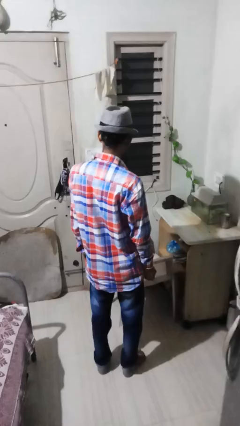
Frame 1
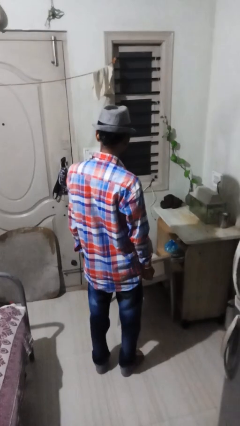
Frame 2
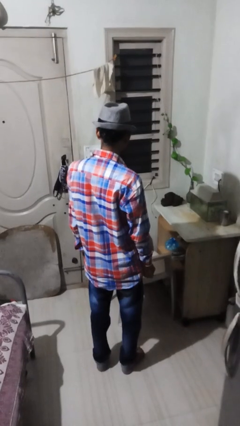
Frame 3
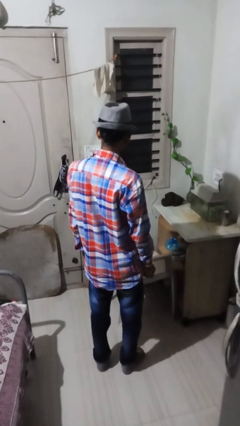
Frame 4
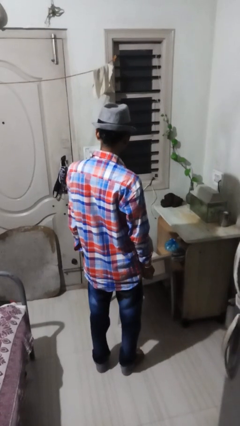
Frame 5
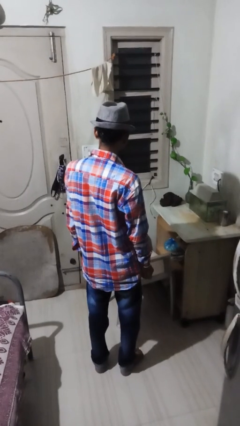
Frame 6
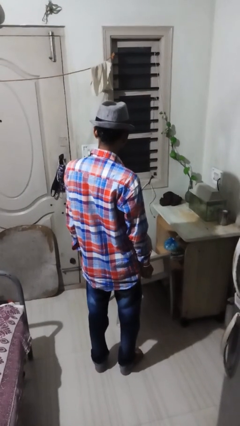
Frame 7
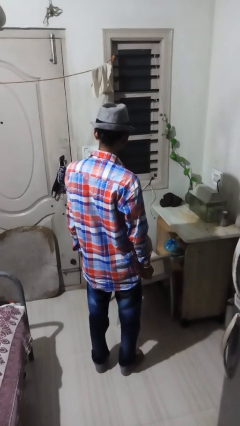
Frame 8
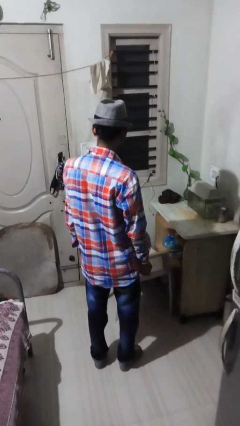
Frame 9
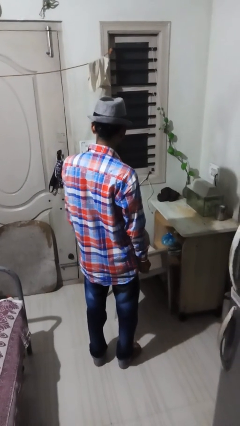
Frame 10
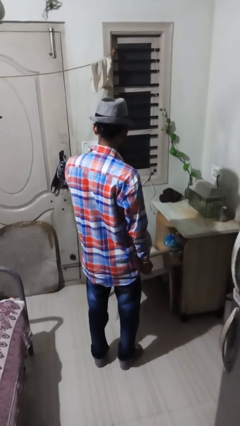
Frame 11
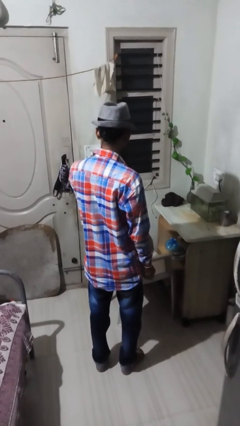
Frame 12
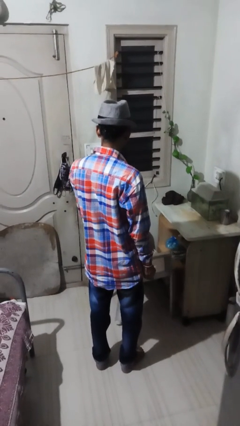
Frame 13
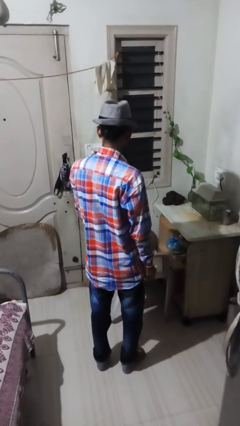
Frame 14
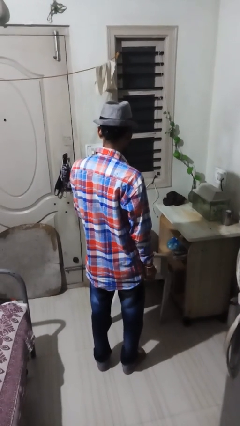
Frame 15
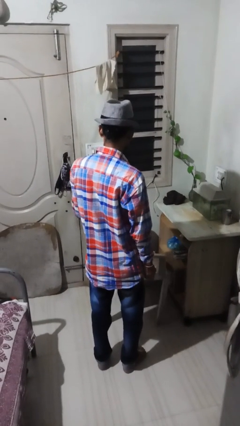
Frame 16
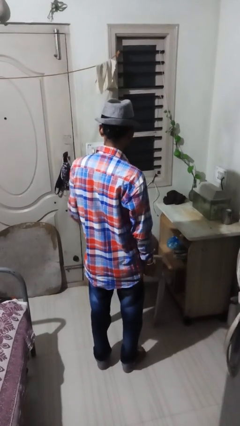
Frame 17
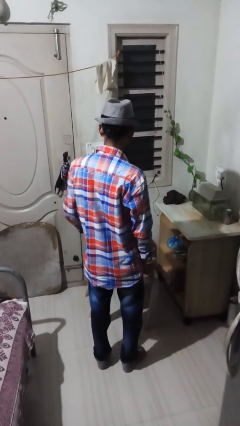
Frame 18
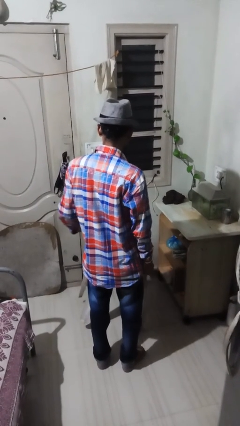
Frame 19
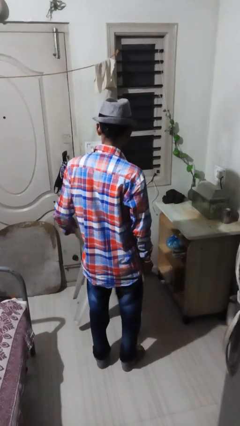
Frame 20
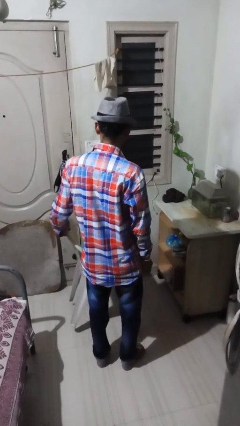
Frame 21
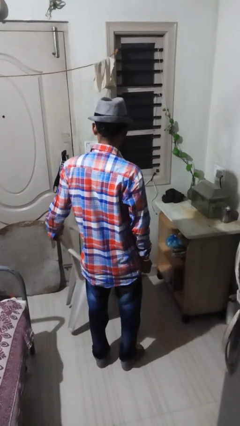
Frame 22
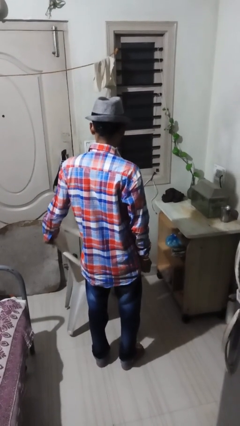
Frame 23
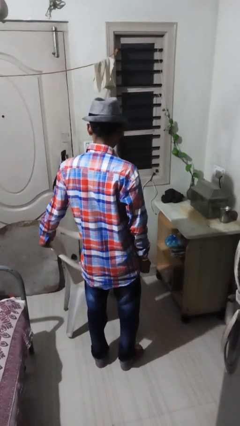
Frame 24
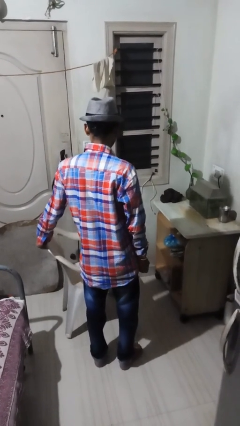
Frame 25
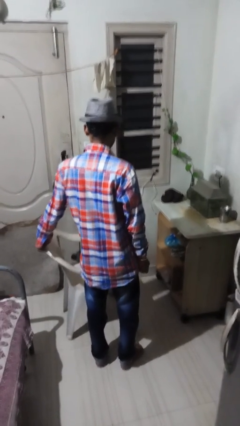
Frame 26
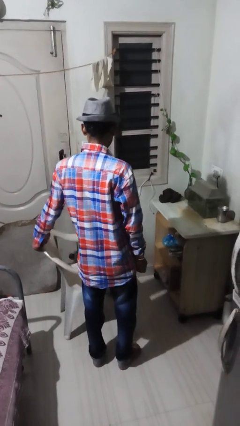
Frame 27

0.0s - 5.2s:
person pulls out chair

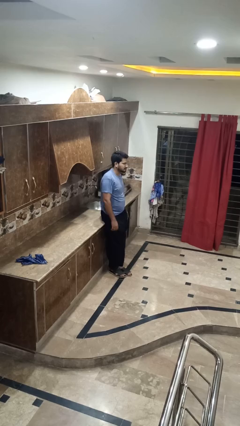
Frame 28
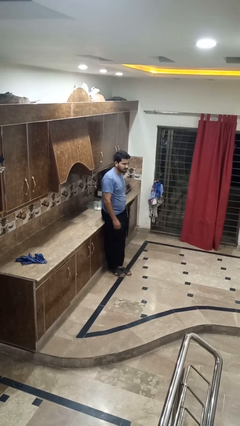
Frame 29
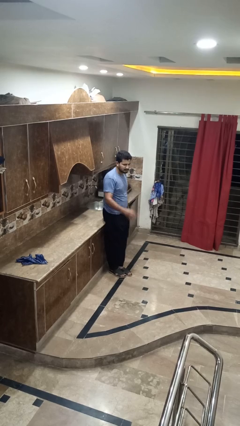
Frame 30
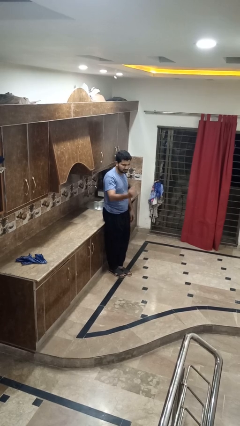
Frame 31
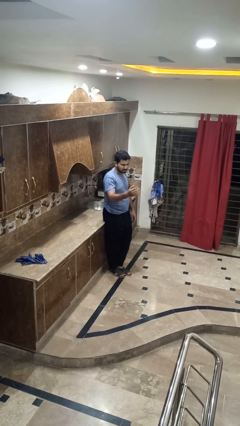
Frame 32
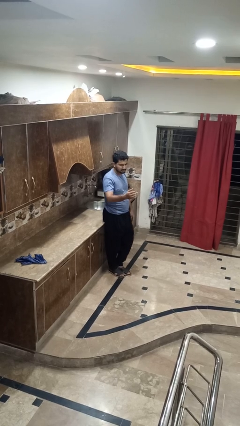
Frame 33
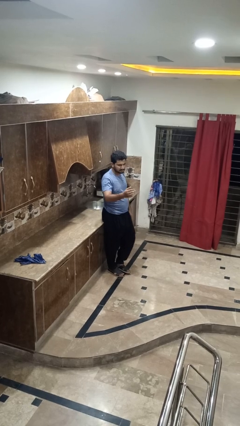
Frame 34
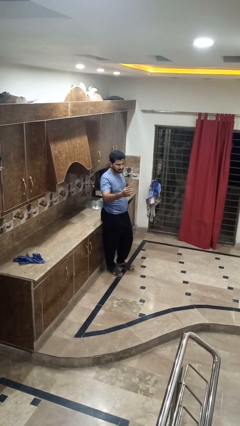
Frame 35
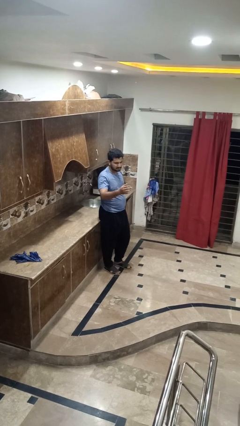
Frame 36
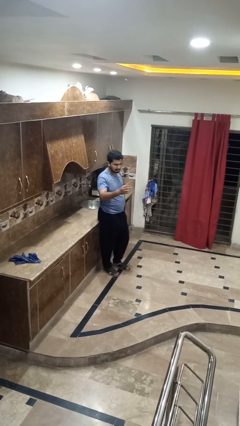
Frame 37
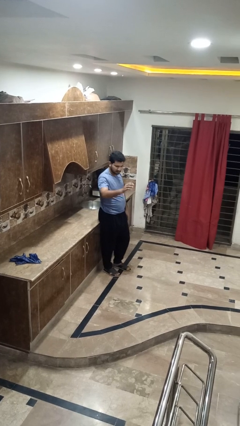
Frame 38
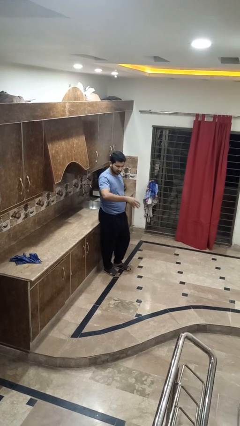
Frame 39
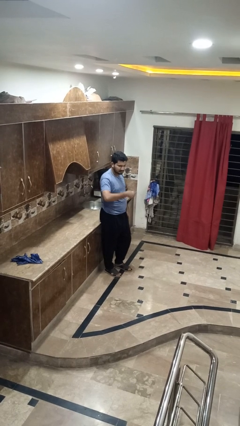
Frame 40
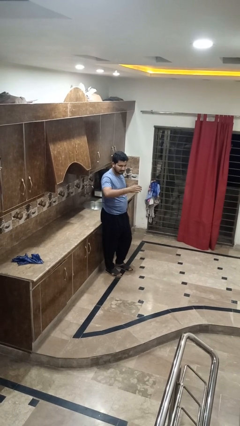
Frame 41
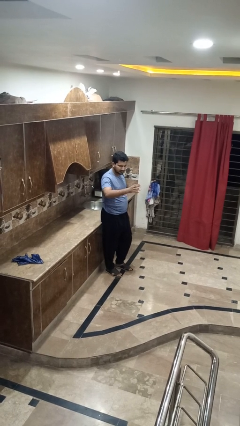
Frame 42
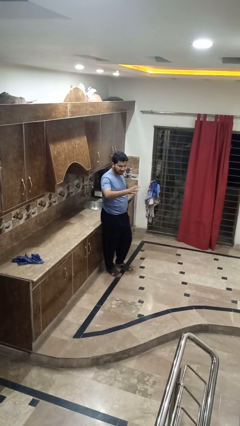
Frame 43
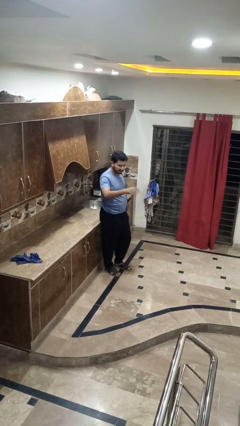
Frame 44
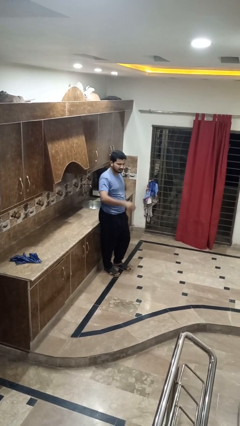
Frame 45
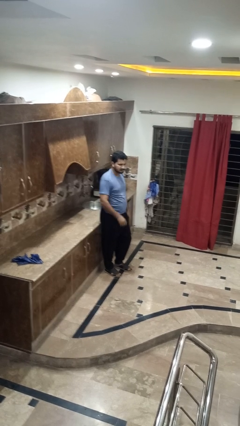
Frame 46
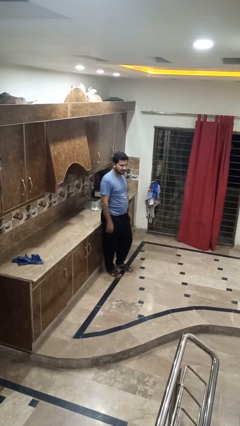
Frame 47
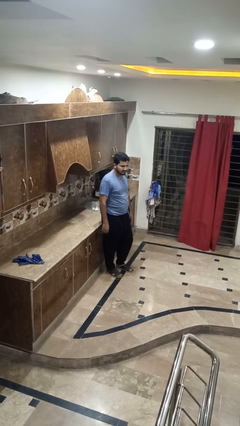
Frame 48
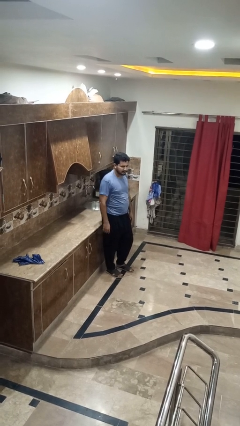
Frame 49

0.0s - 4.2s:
person gestures come here

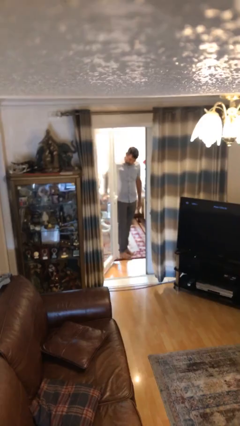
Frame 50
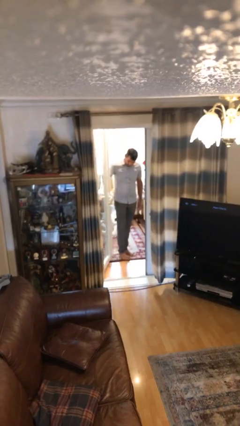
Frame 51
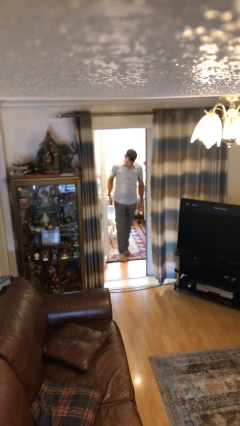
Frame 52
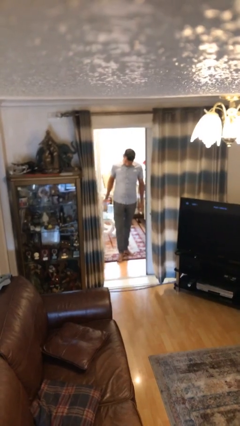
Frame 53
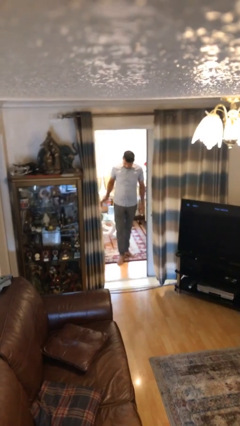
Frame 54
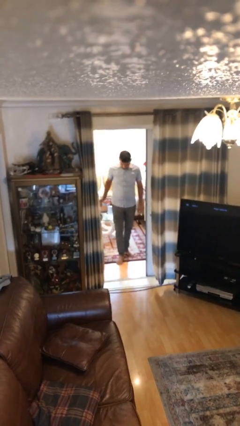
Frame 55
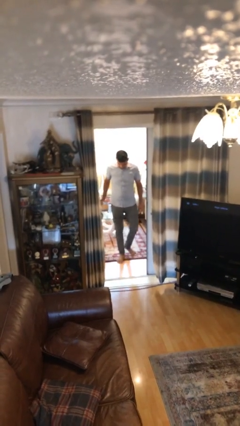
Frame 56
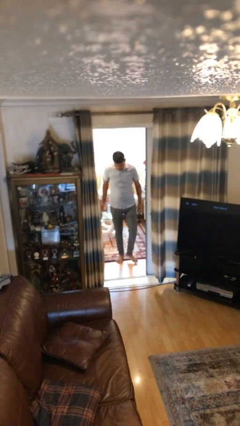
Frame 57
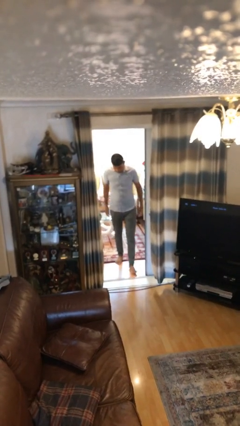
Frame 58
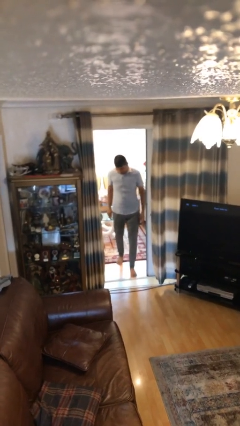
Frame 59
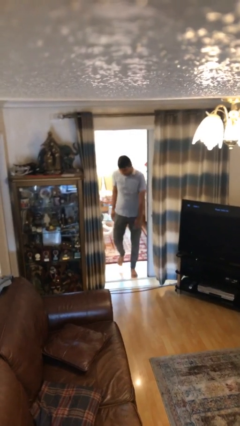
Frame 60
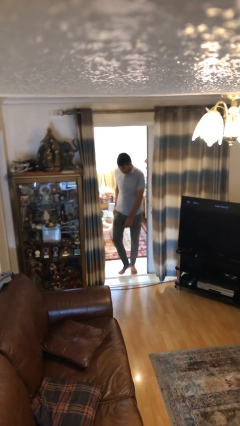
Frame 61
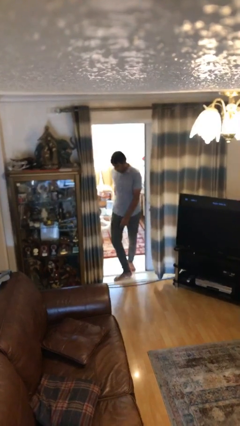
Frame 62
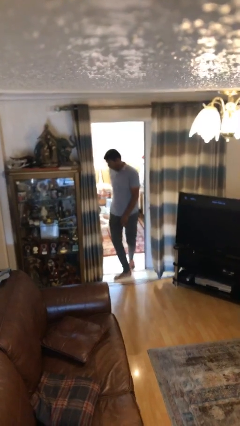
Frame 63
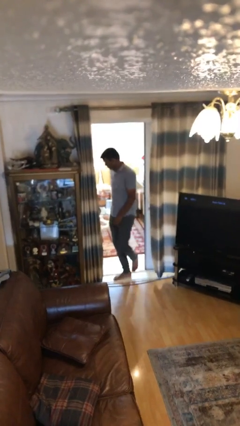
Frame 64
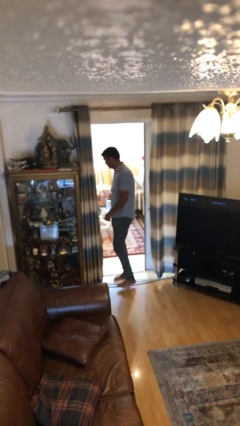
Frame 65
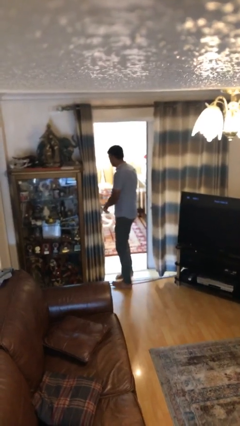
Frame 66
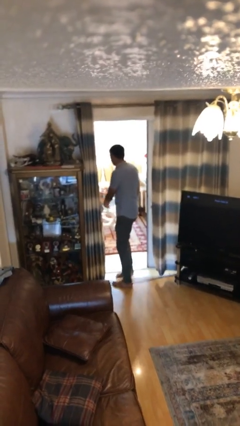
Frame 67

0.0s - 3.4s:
person enters scene through structure

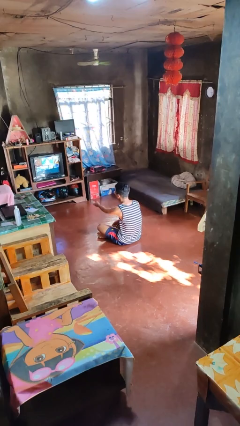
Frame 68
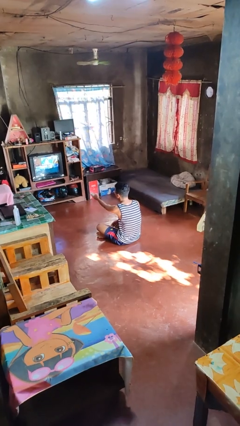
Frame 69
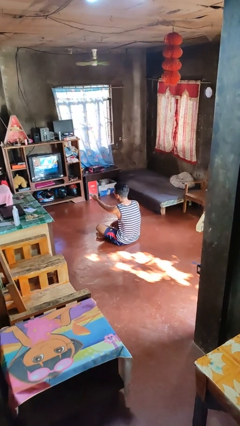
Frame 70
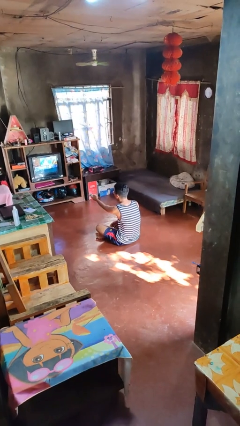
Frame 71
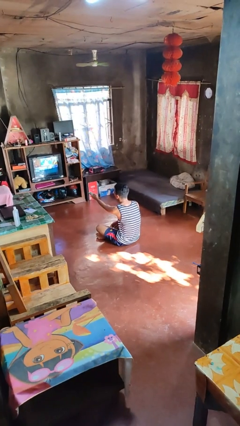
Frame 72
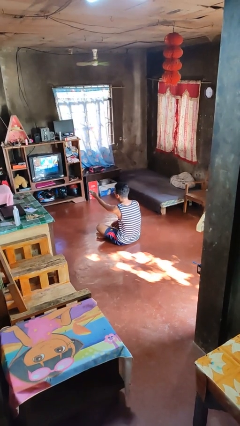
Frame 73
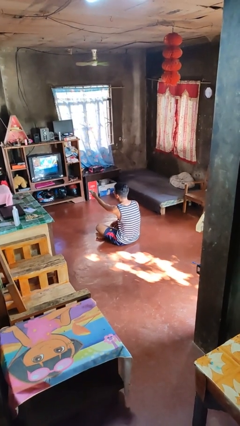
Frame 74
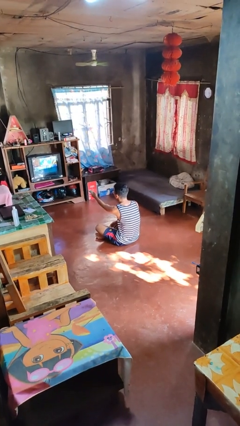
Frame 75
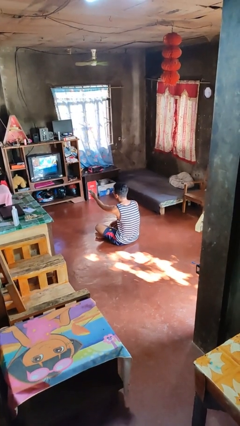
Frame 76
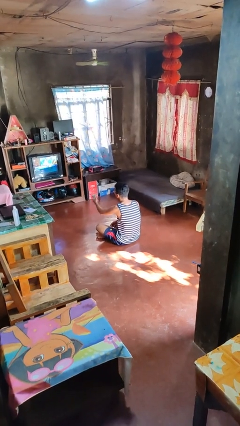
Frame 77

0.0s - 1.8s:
person uses television remote

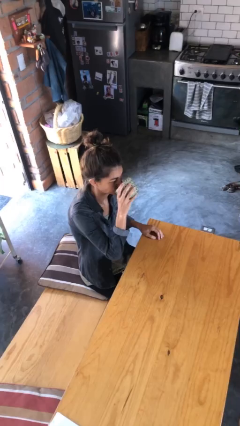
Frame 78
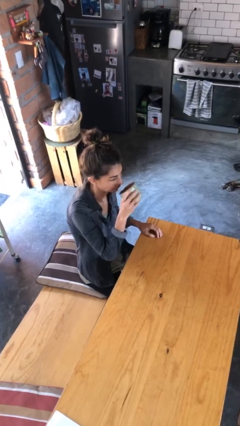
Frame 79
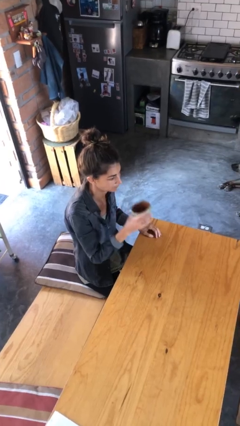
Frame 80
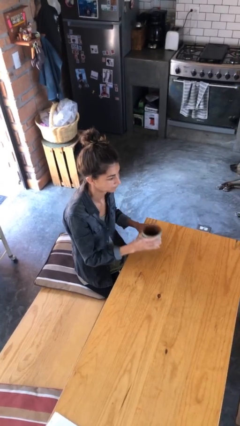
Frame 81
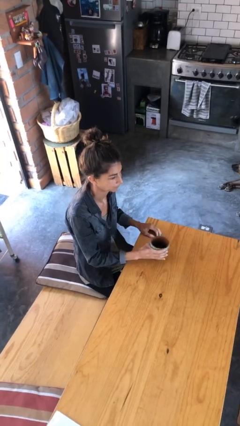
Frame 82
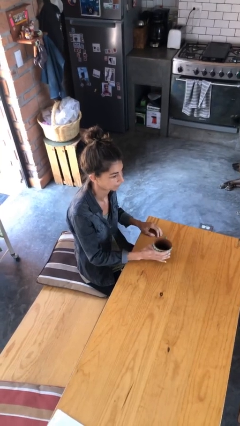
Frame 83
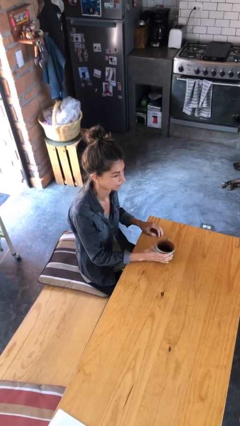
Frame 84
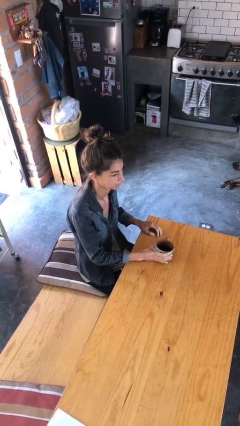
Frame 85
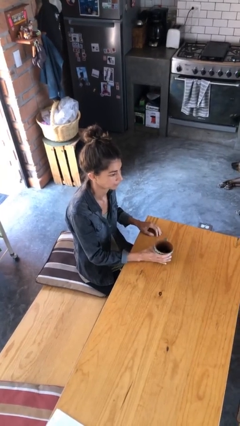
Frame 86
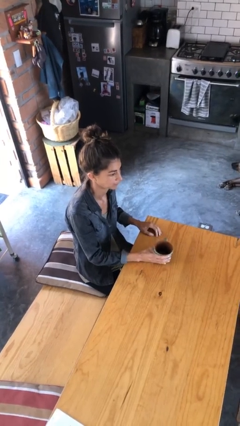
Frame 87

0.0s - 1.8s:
person puts down object on table

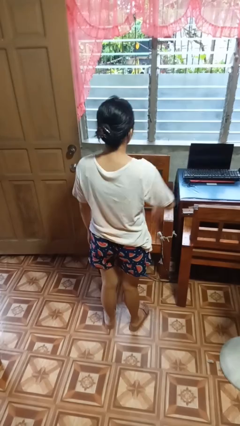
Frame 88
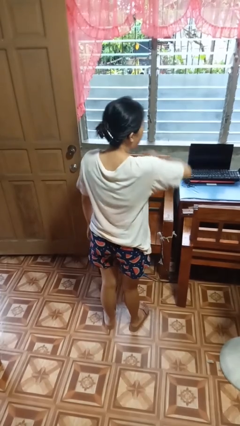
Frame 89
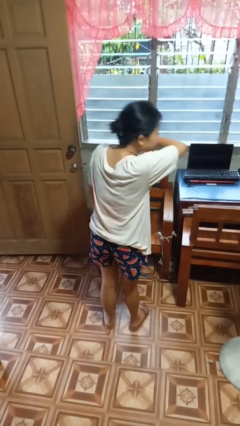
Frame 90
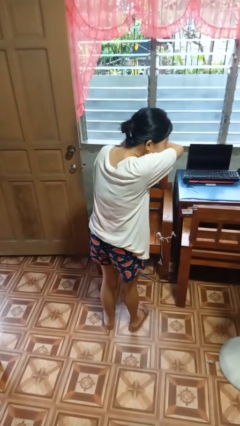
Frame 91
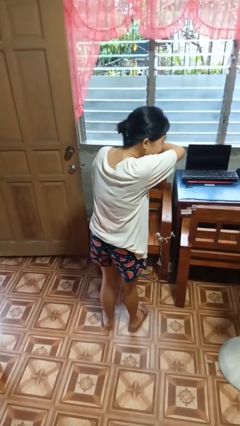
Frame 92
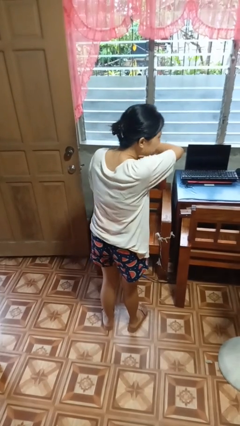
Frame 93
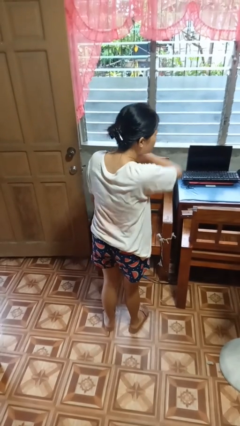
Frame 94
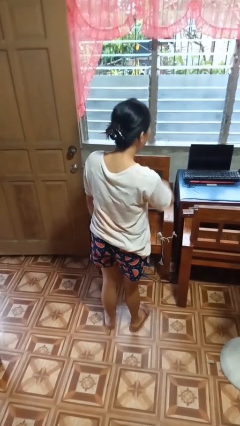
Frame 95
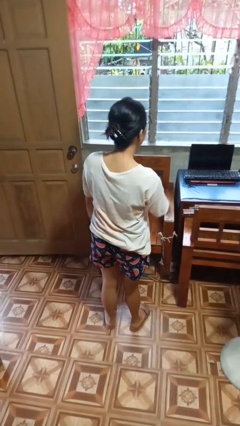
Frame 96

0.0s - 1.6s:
person sneezes into arm
